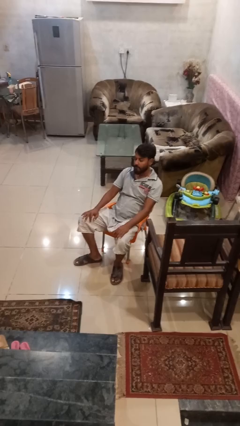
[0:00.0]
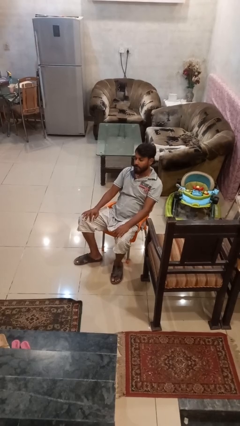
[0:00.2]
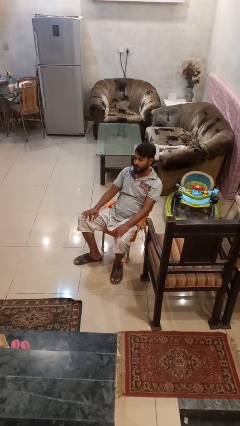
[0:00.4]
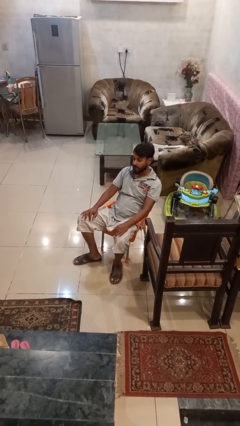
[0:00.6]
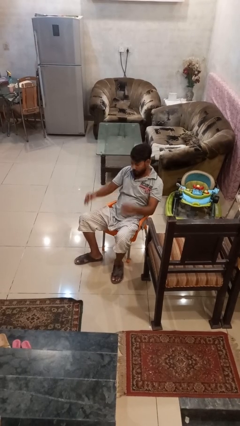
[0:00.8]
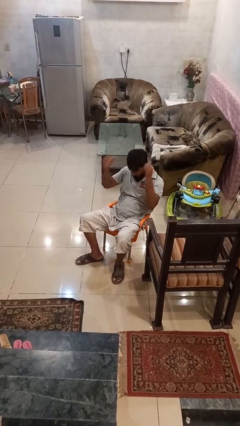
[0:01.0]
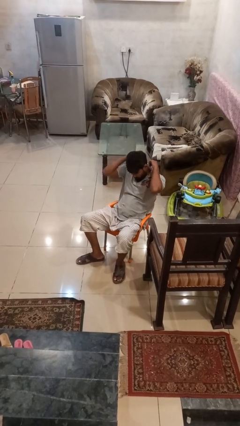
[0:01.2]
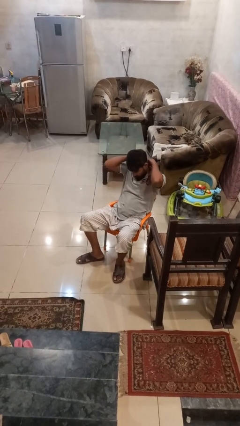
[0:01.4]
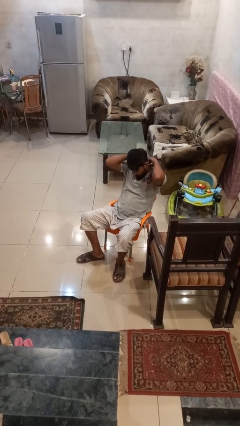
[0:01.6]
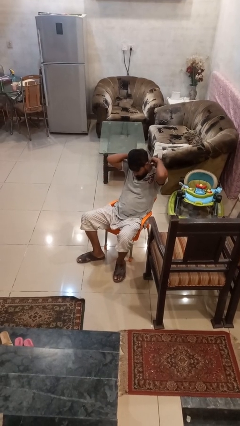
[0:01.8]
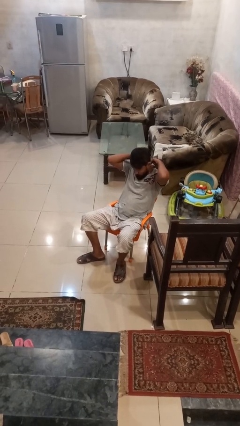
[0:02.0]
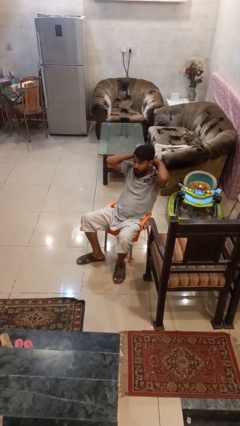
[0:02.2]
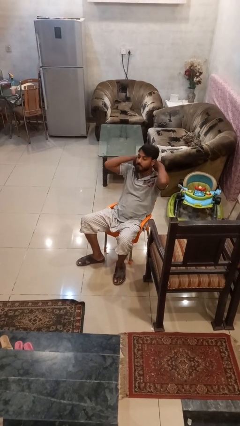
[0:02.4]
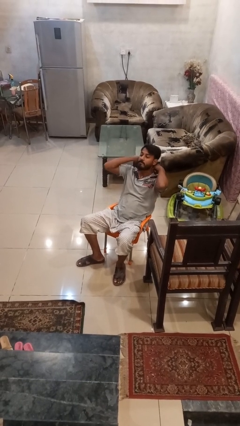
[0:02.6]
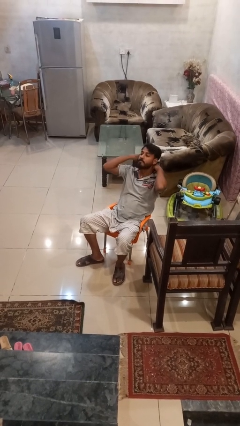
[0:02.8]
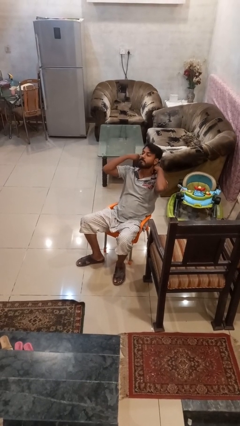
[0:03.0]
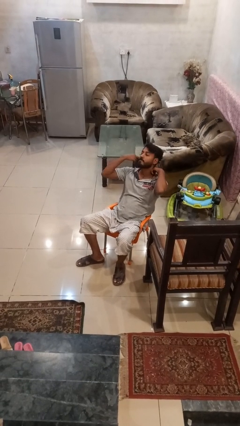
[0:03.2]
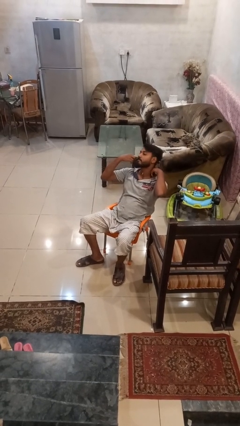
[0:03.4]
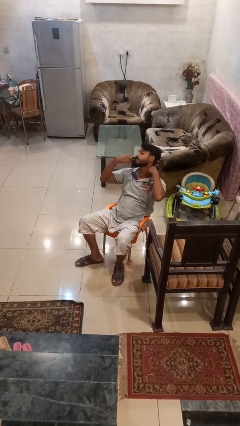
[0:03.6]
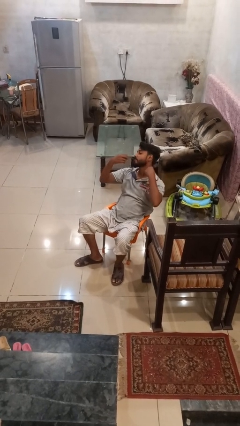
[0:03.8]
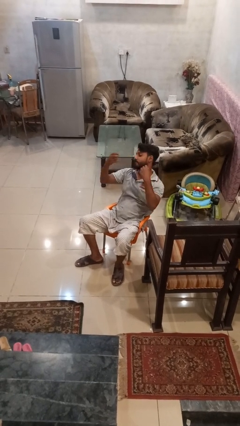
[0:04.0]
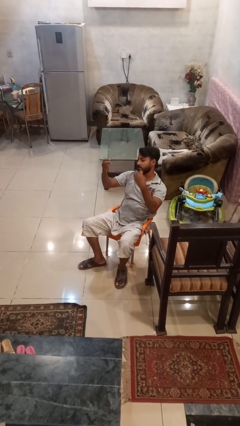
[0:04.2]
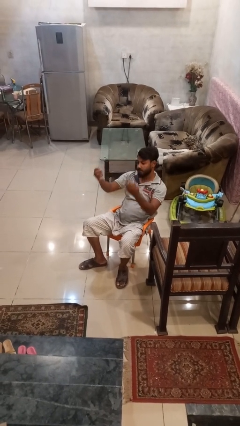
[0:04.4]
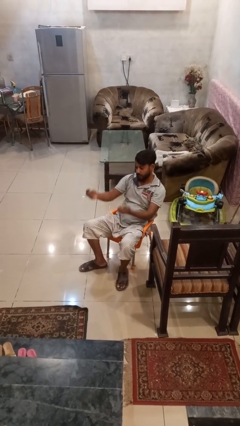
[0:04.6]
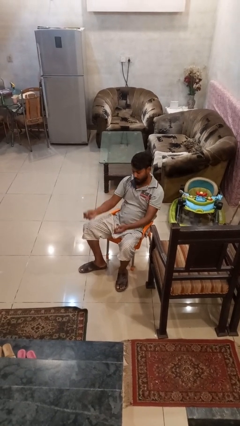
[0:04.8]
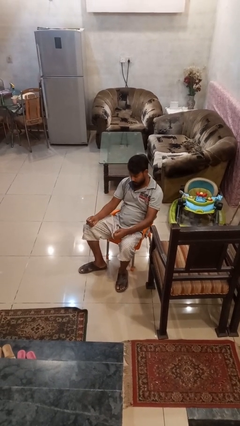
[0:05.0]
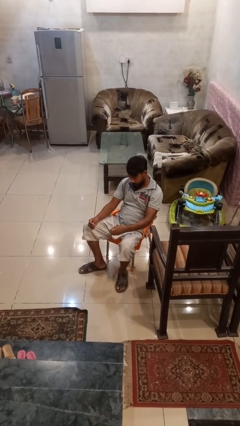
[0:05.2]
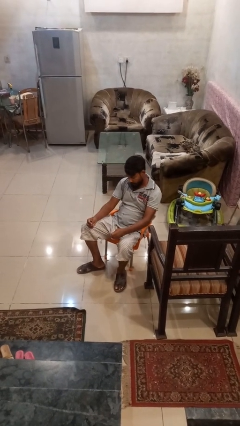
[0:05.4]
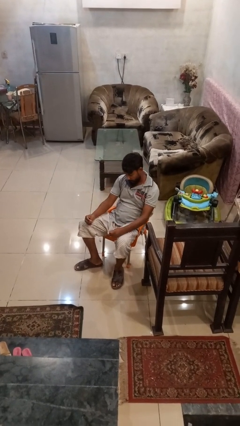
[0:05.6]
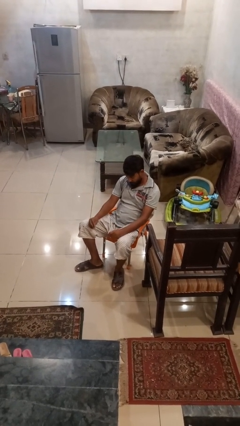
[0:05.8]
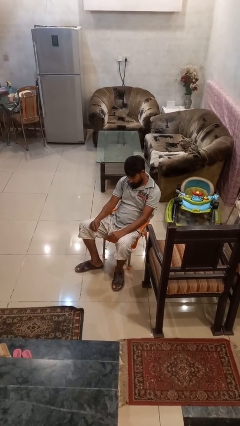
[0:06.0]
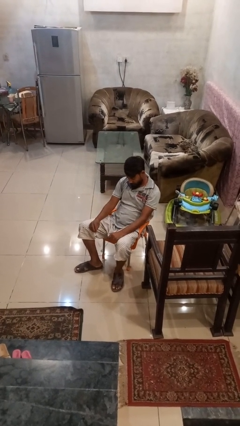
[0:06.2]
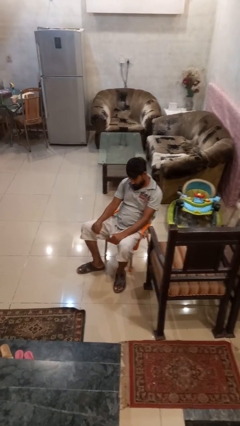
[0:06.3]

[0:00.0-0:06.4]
person takes off necklace

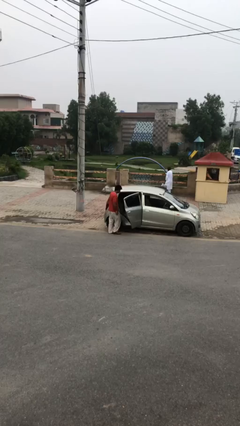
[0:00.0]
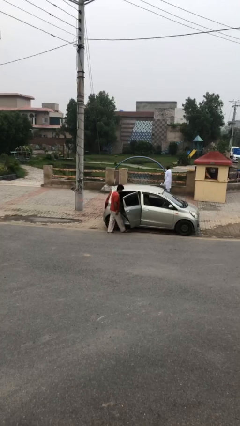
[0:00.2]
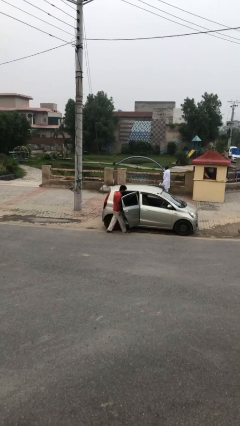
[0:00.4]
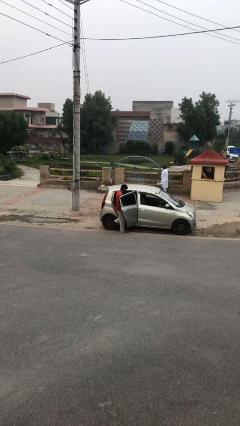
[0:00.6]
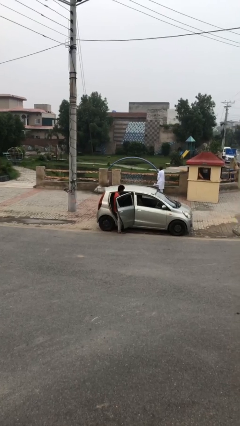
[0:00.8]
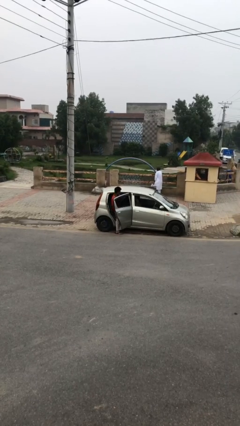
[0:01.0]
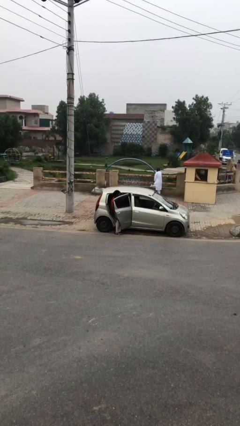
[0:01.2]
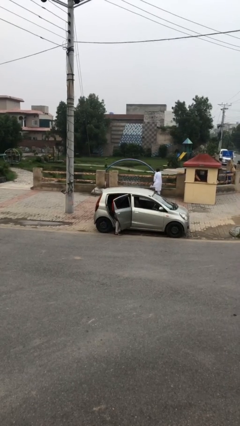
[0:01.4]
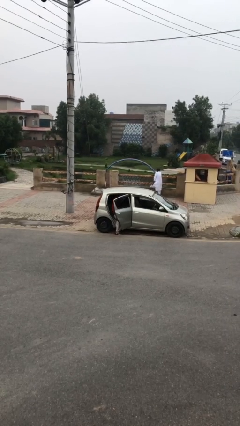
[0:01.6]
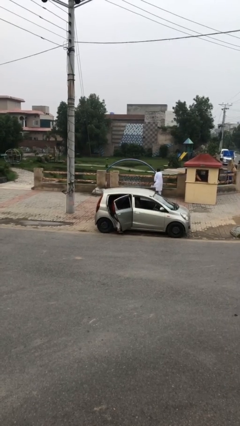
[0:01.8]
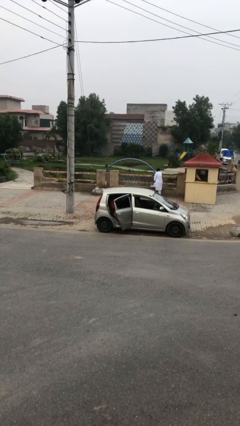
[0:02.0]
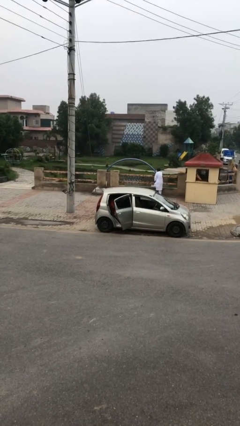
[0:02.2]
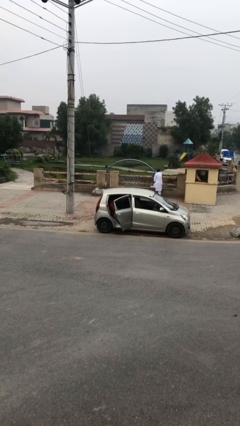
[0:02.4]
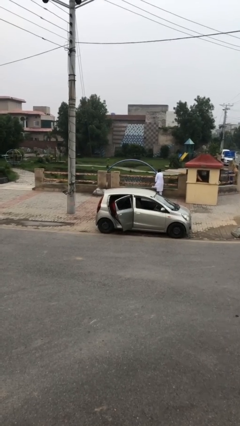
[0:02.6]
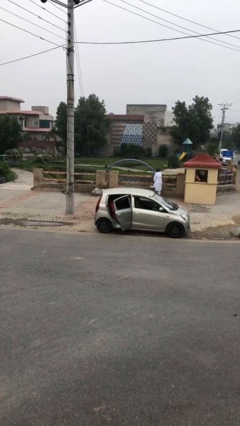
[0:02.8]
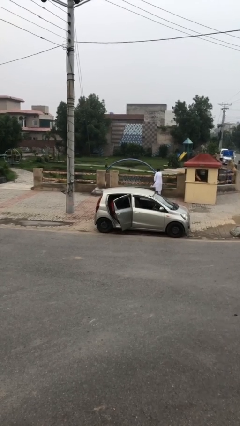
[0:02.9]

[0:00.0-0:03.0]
person enters car

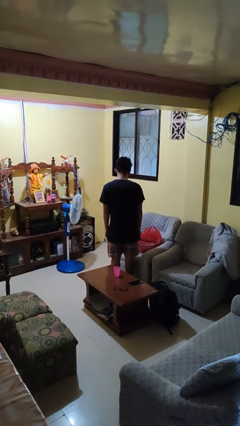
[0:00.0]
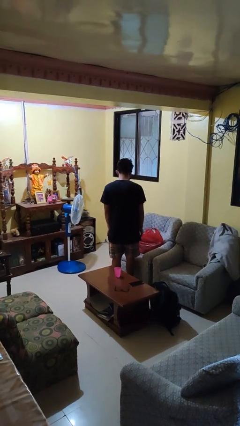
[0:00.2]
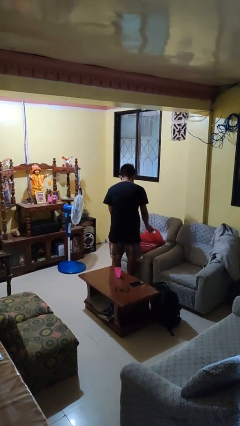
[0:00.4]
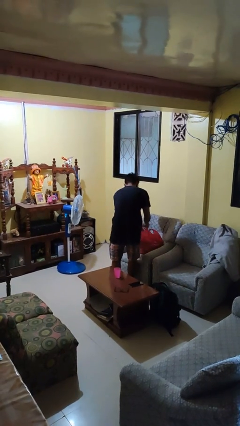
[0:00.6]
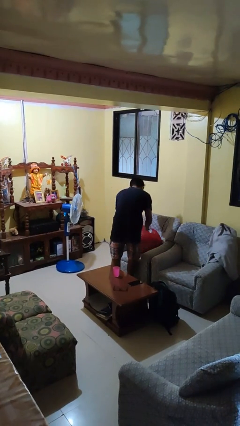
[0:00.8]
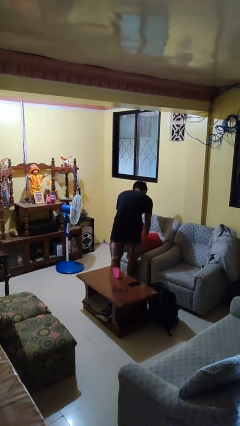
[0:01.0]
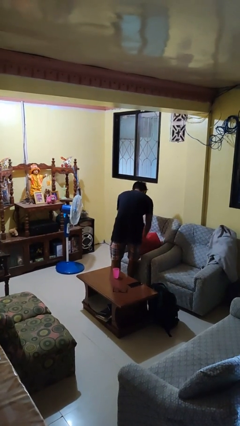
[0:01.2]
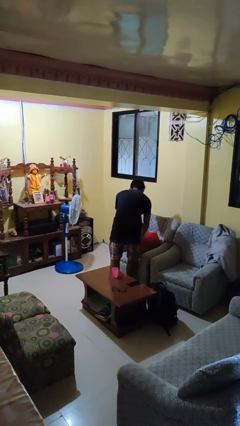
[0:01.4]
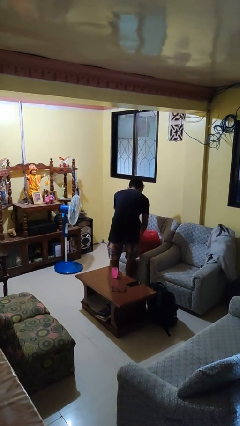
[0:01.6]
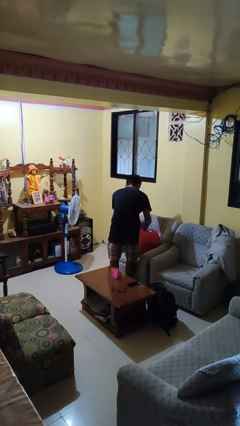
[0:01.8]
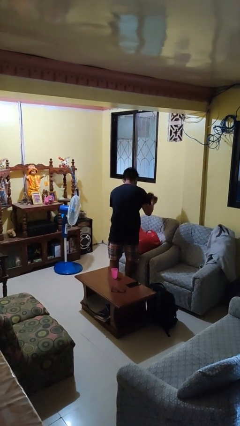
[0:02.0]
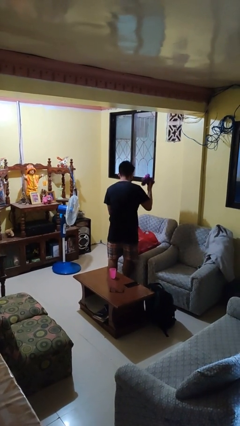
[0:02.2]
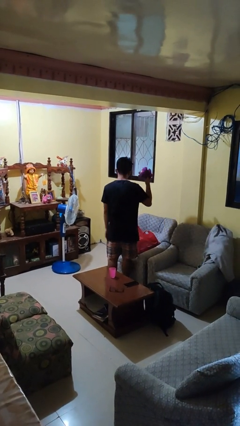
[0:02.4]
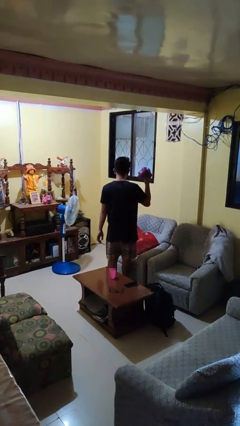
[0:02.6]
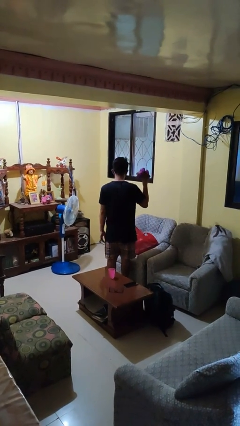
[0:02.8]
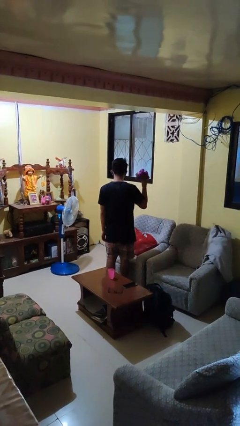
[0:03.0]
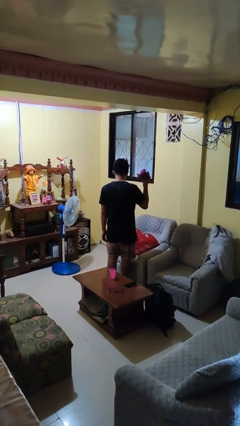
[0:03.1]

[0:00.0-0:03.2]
person takes object from bag

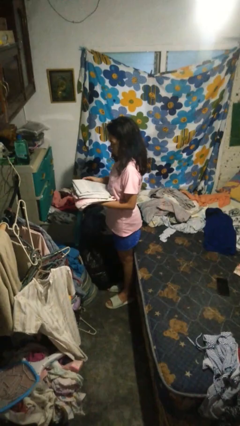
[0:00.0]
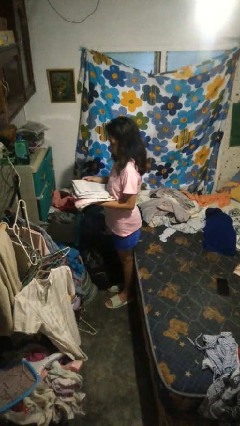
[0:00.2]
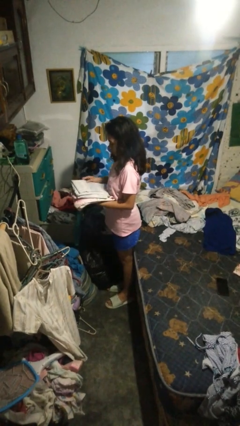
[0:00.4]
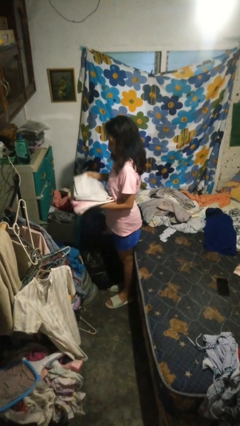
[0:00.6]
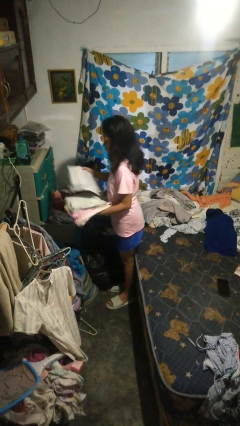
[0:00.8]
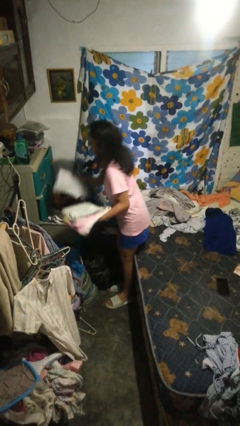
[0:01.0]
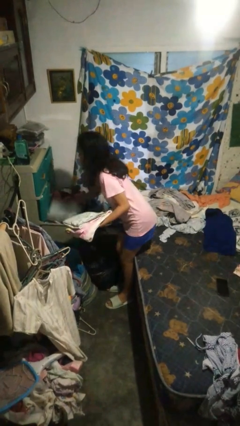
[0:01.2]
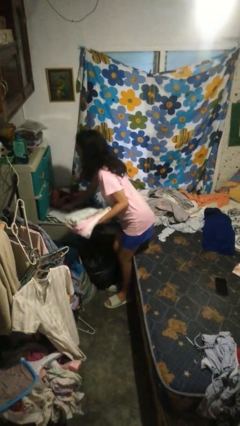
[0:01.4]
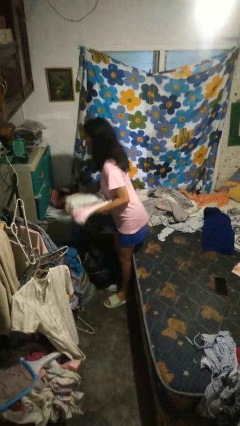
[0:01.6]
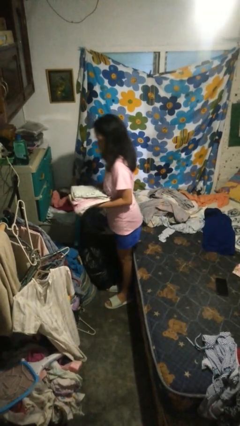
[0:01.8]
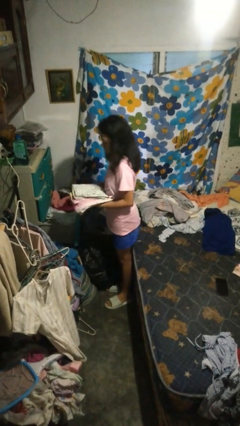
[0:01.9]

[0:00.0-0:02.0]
person puts clothes into dresser

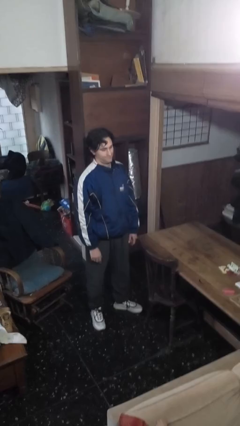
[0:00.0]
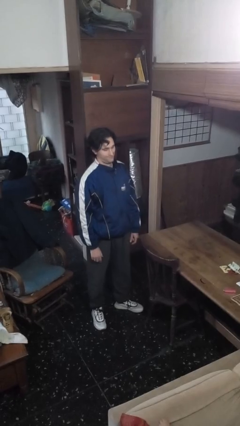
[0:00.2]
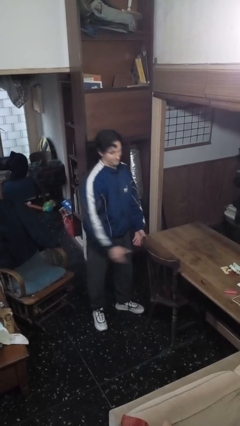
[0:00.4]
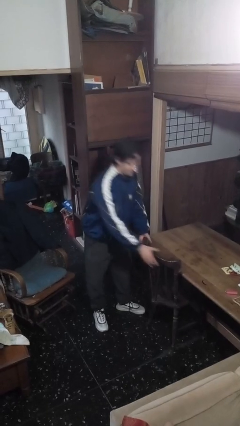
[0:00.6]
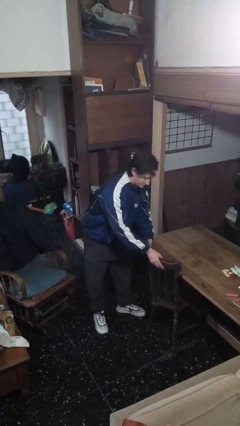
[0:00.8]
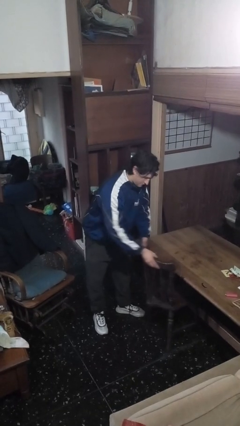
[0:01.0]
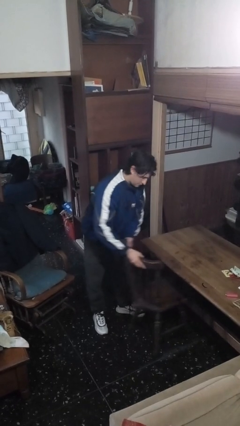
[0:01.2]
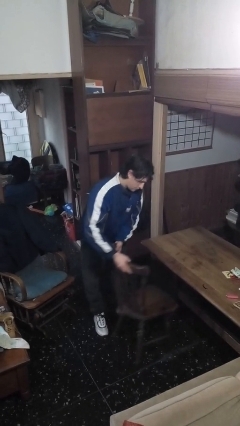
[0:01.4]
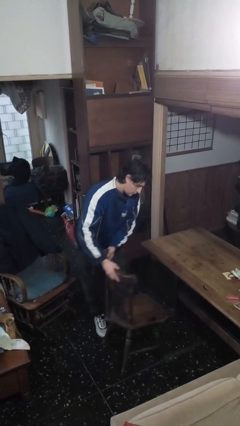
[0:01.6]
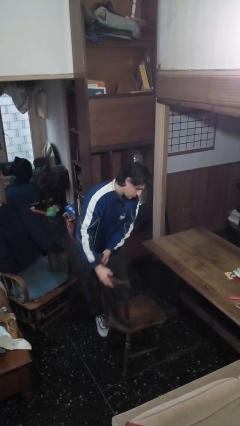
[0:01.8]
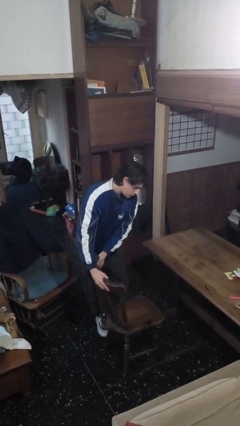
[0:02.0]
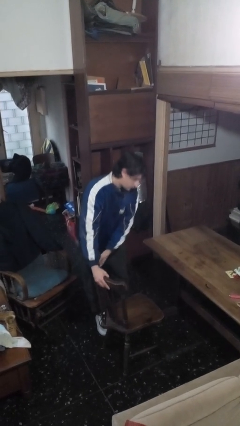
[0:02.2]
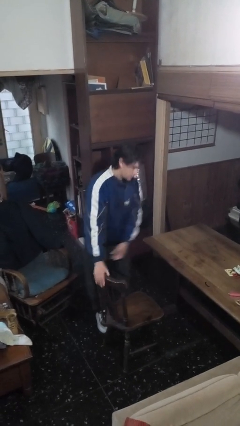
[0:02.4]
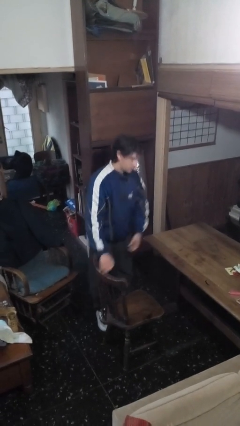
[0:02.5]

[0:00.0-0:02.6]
person pulls out chair

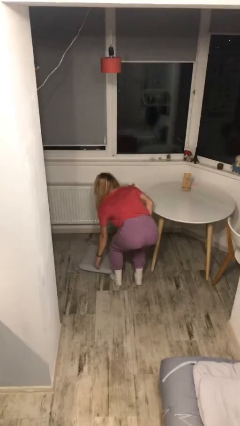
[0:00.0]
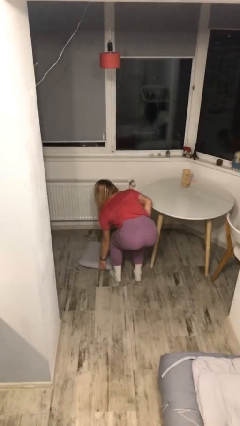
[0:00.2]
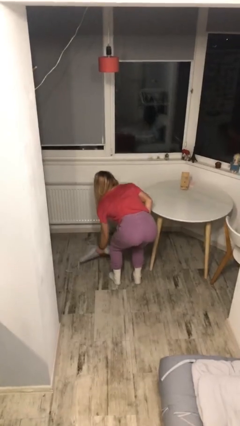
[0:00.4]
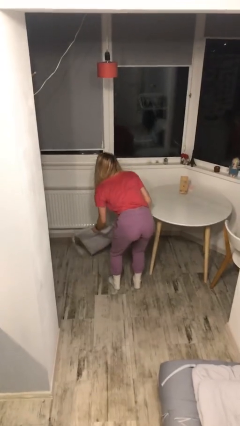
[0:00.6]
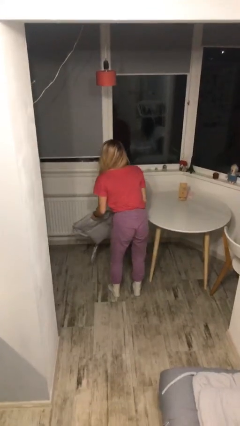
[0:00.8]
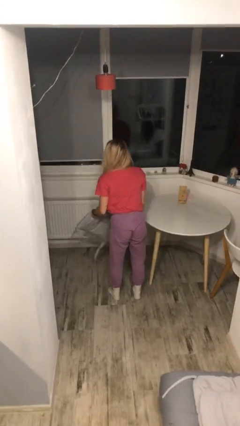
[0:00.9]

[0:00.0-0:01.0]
person picks up object from floor
